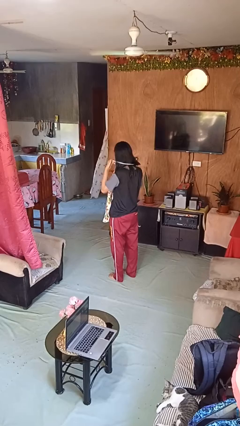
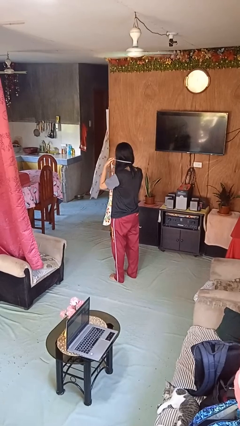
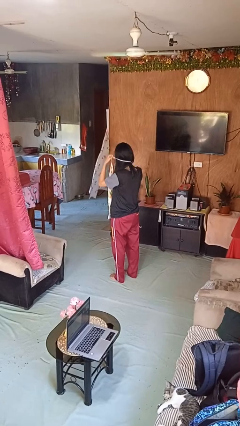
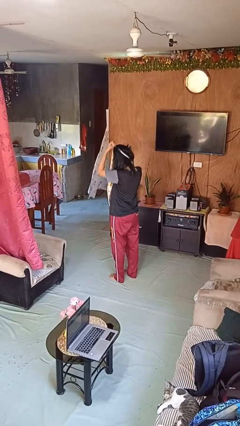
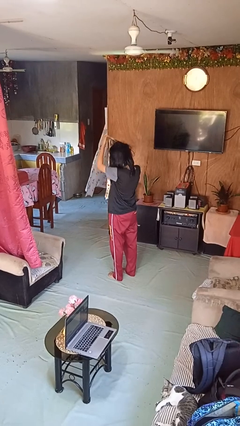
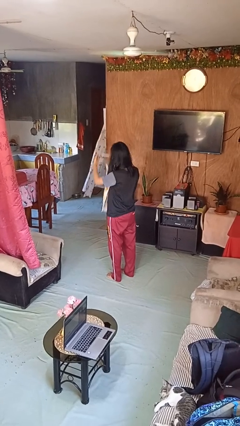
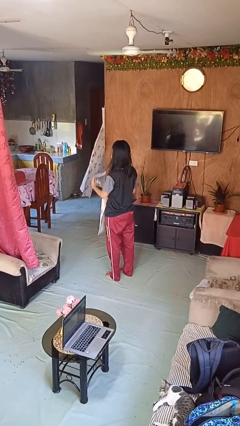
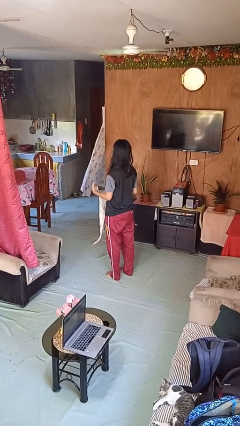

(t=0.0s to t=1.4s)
person takes off apron

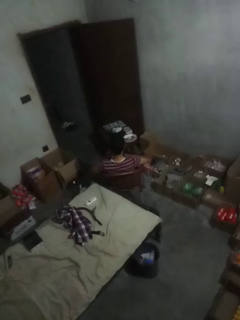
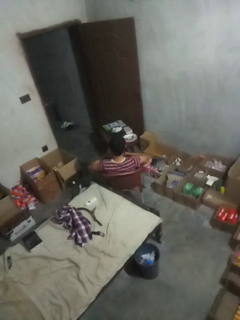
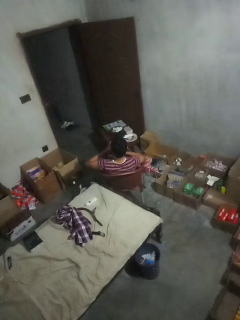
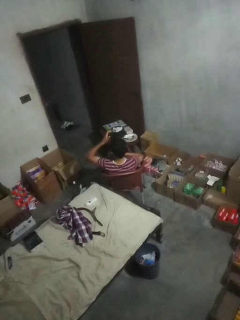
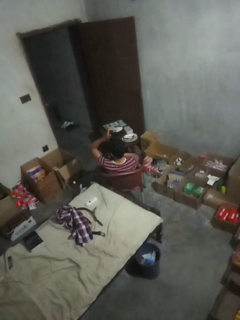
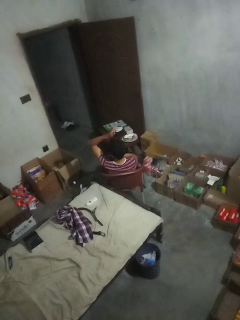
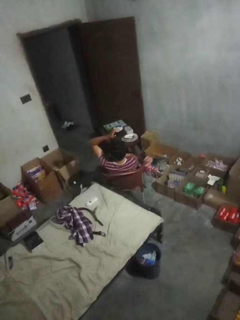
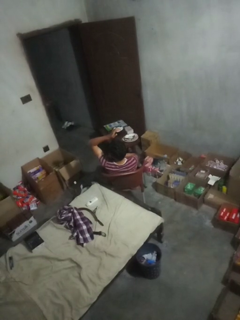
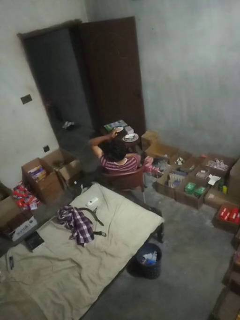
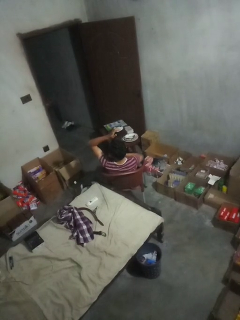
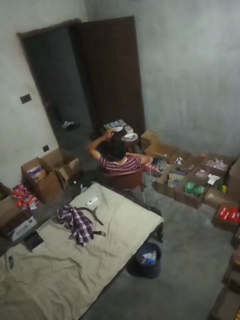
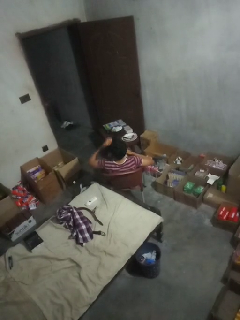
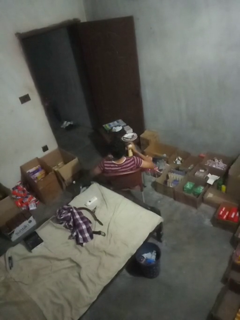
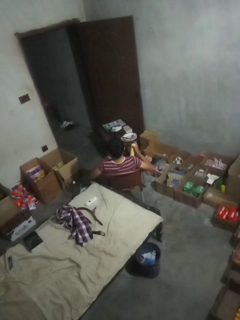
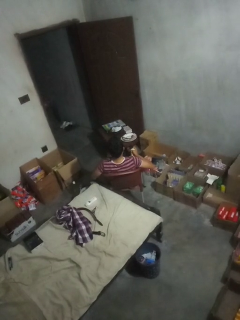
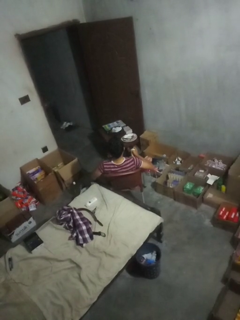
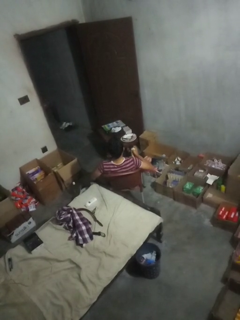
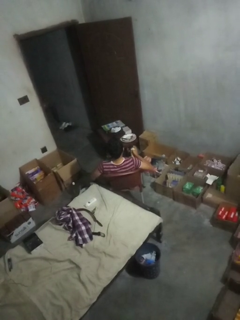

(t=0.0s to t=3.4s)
person applies deodorant

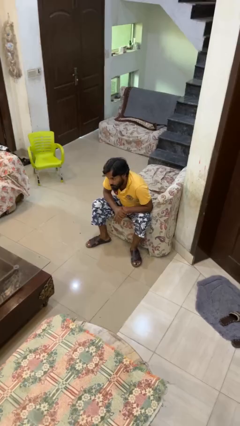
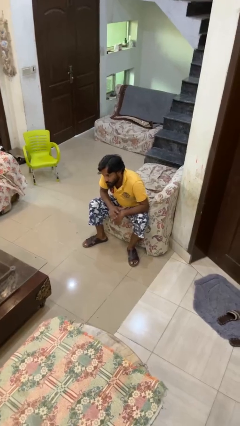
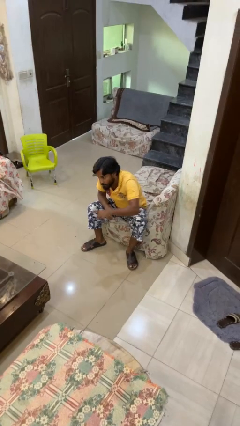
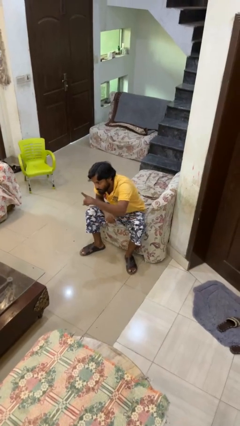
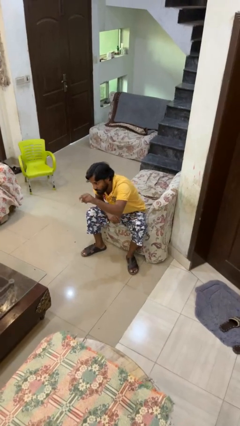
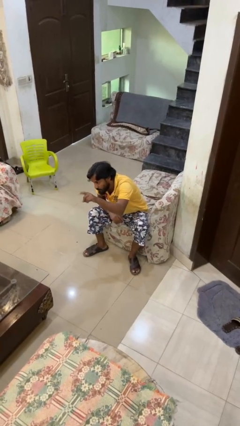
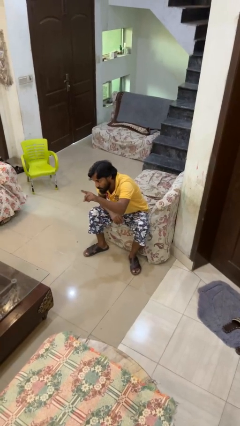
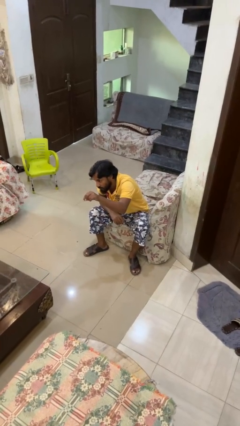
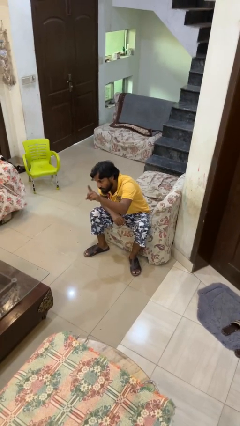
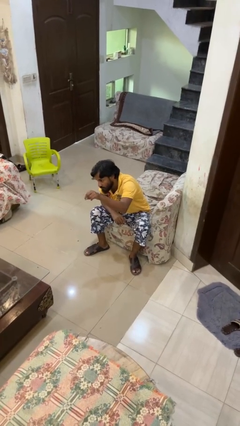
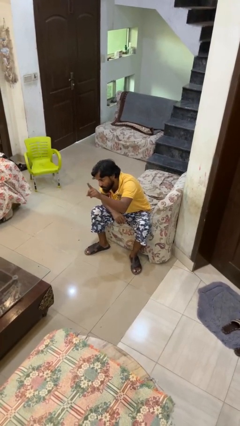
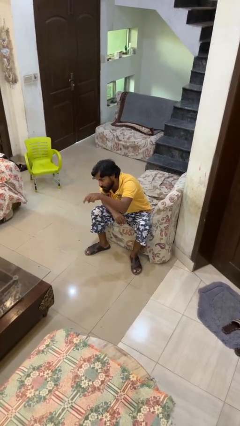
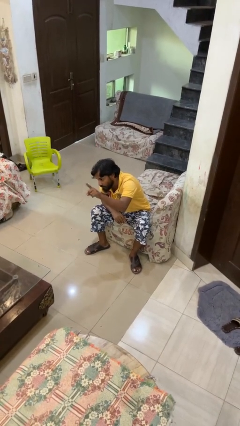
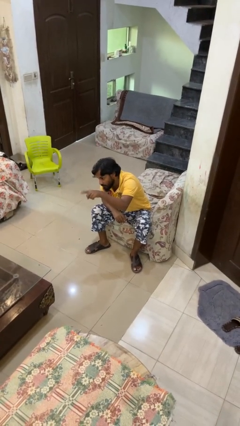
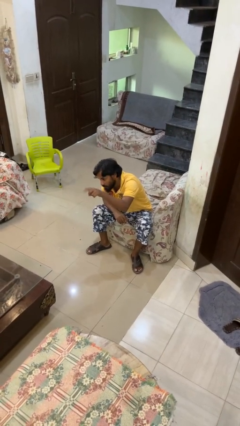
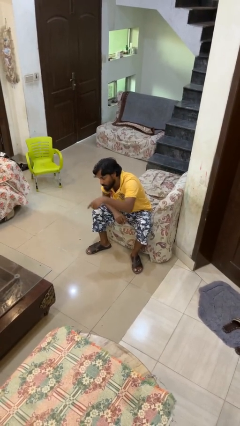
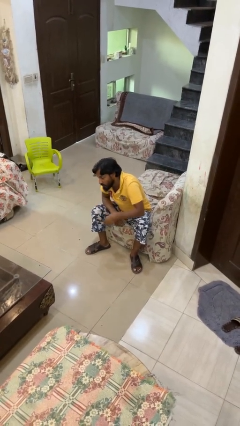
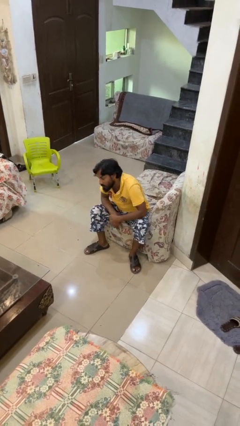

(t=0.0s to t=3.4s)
person gestures come here

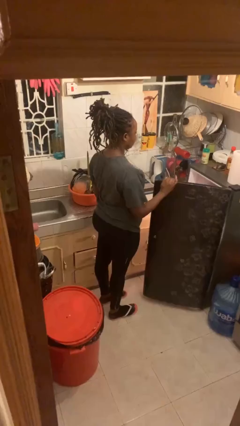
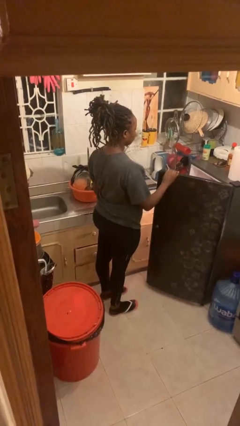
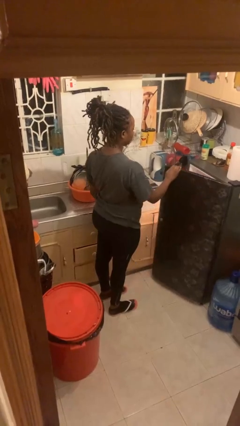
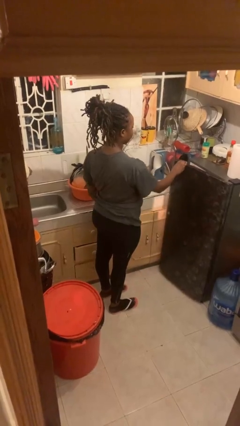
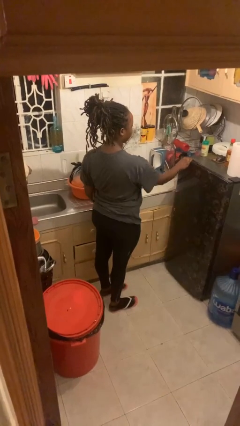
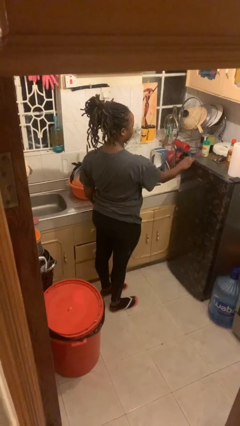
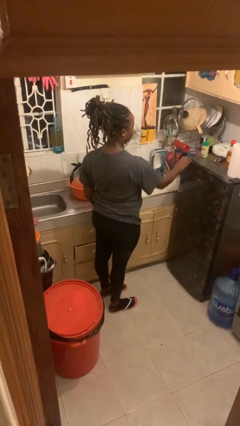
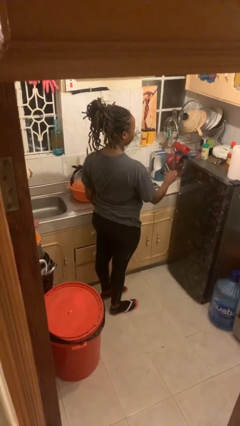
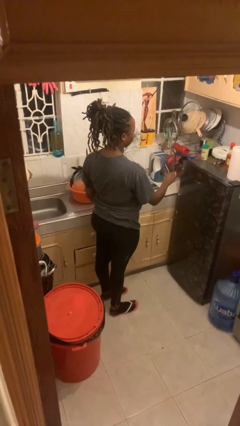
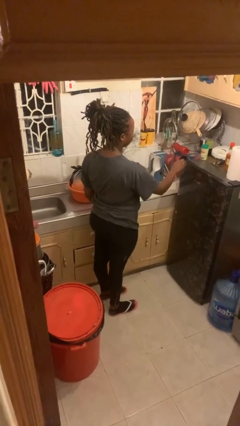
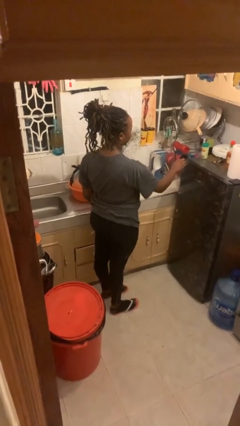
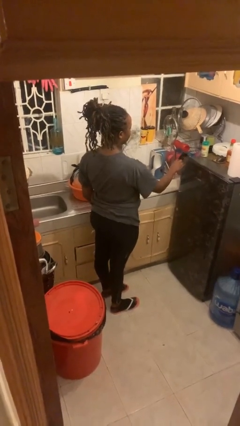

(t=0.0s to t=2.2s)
person closes refrigerator

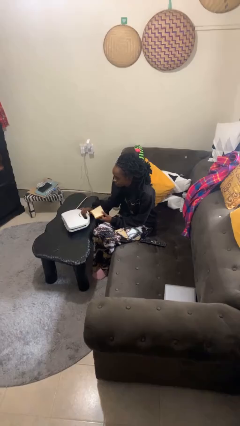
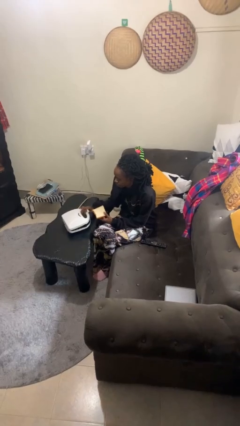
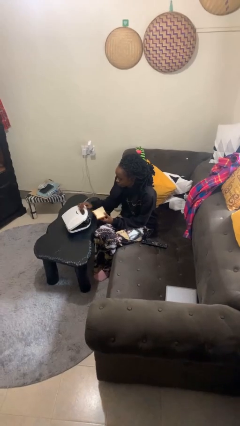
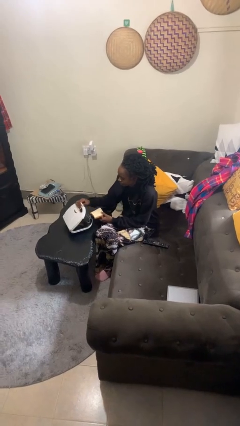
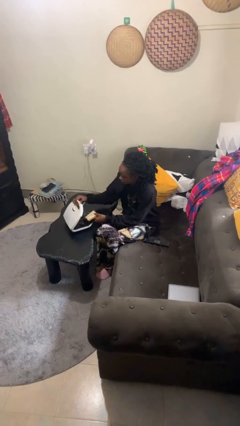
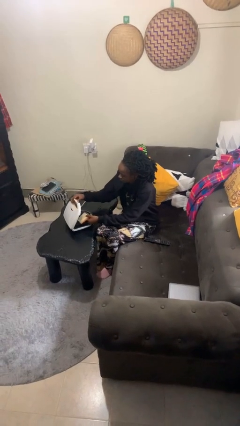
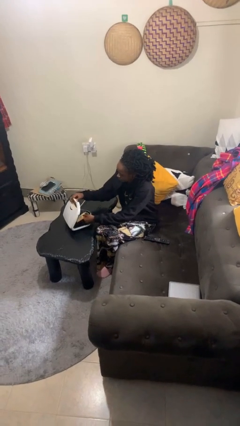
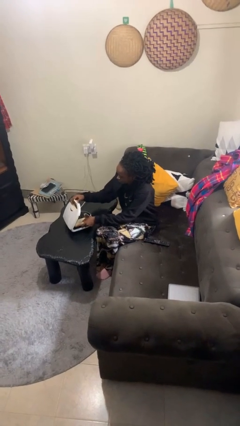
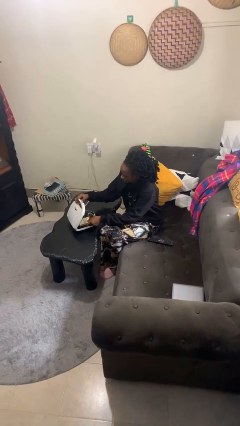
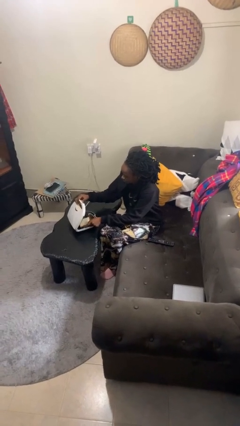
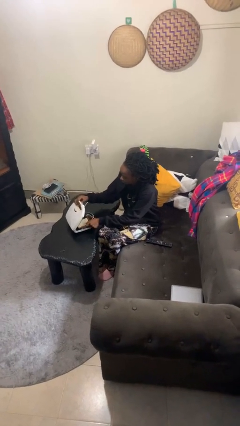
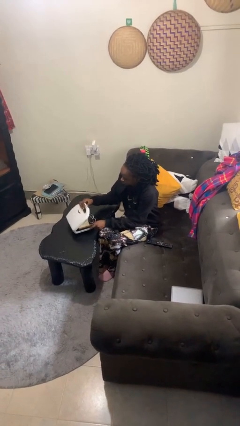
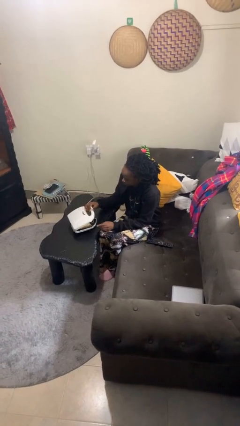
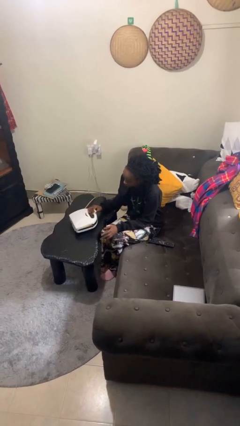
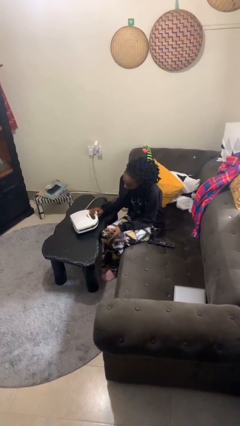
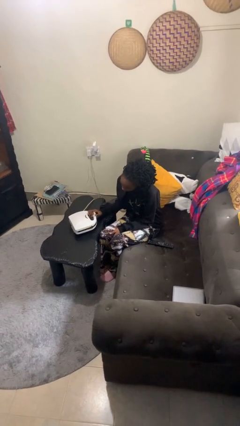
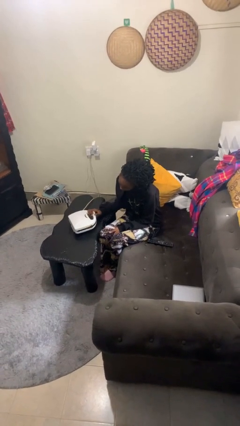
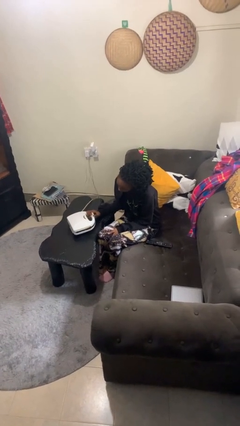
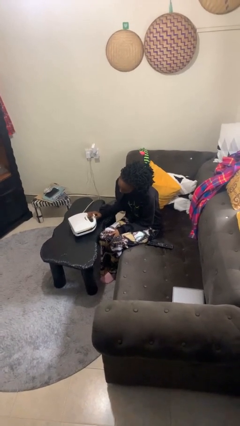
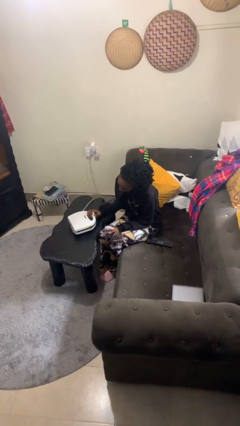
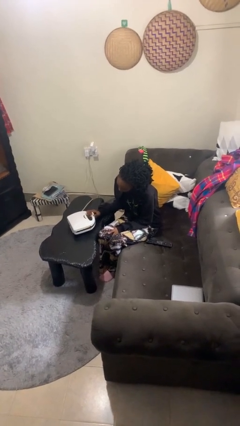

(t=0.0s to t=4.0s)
person puts object into toaster

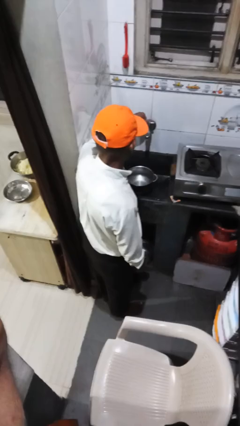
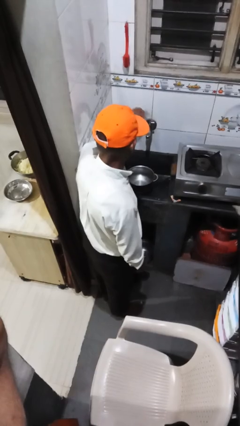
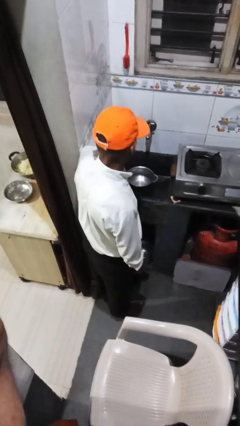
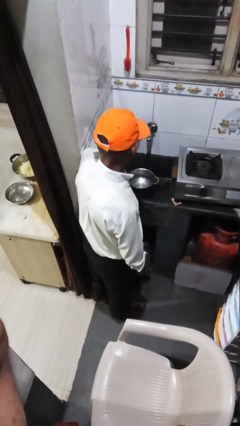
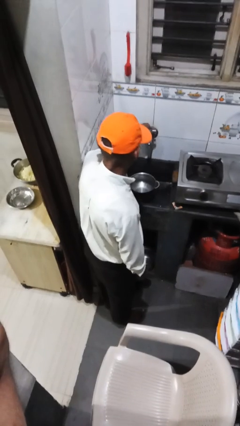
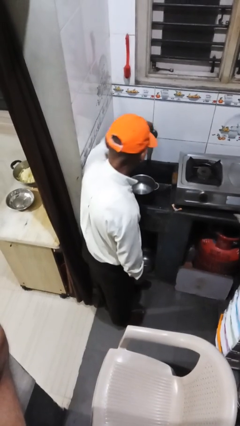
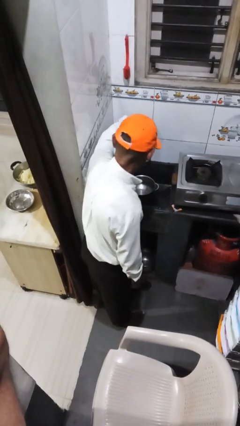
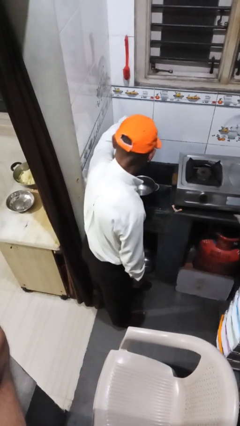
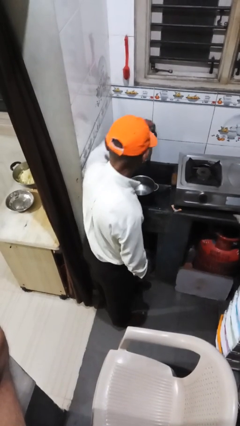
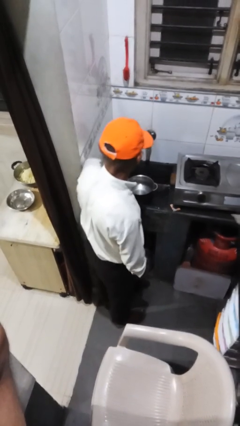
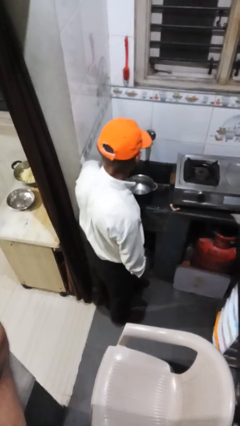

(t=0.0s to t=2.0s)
person turns off faucet

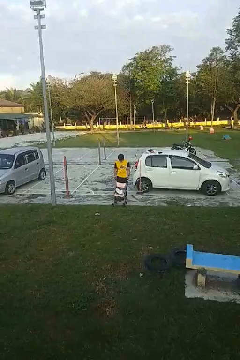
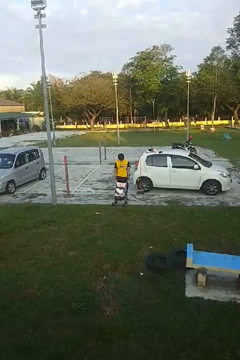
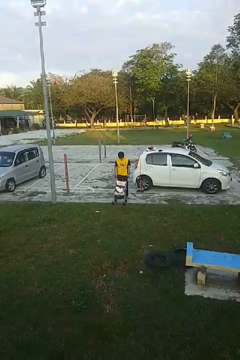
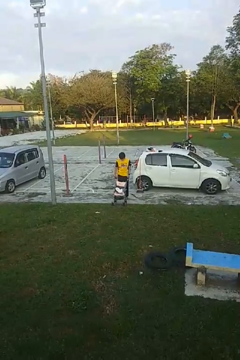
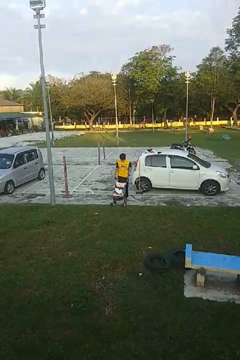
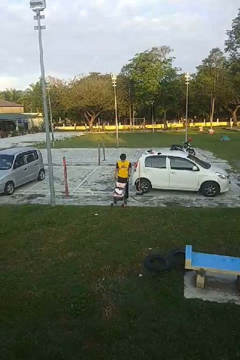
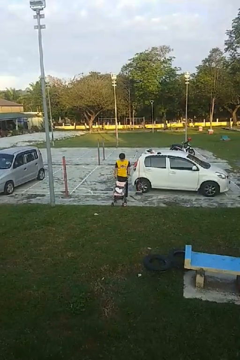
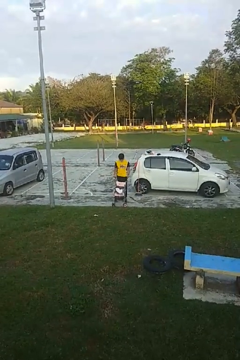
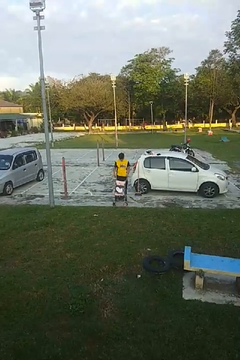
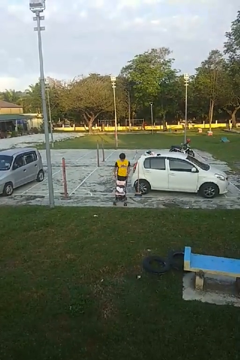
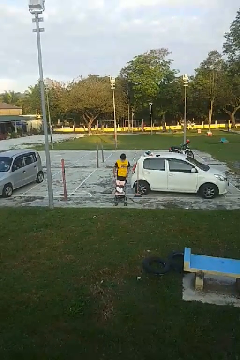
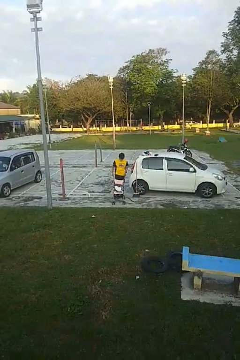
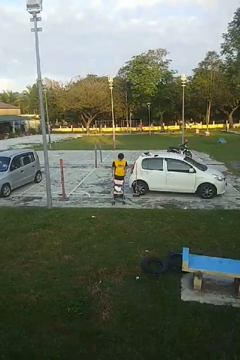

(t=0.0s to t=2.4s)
person pulls wheeled cart

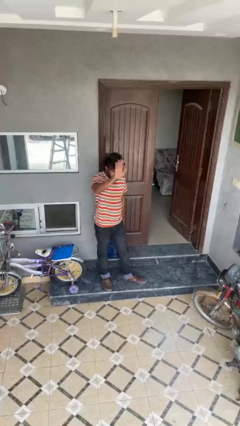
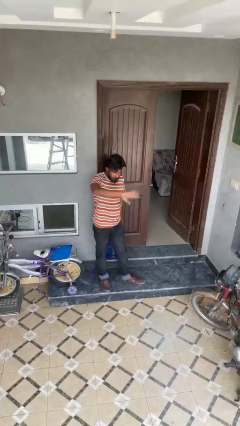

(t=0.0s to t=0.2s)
person gestures swipe down
